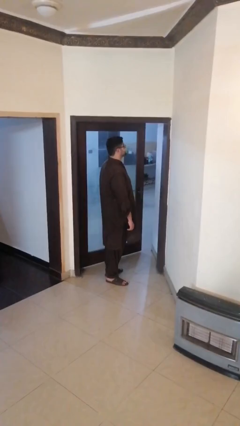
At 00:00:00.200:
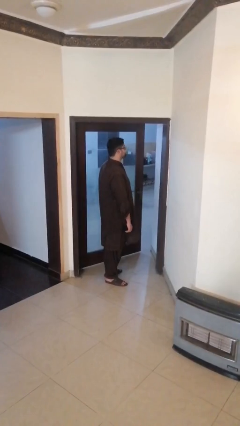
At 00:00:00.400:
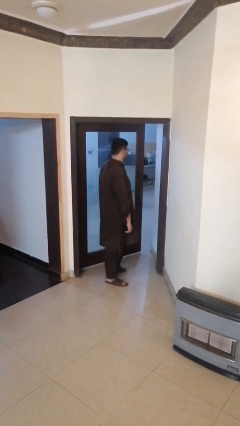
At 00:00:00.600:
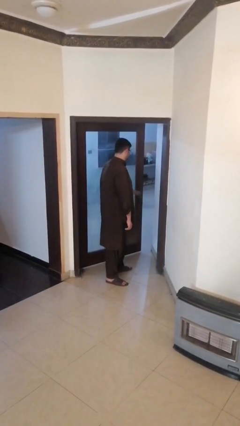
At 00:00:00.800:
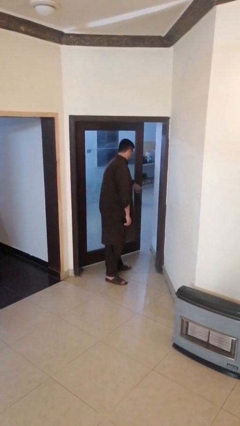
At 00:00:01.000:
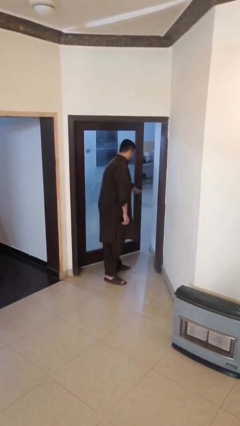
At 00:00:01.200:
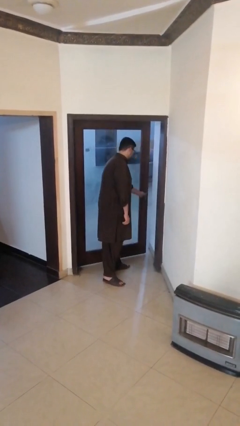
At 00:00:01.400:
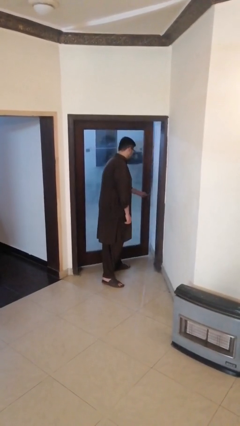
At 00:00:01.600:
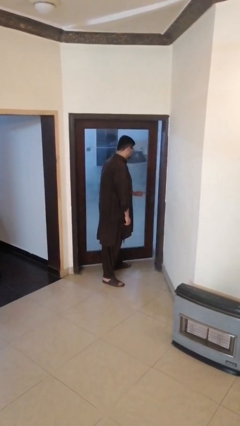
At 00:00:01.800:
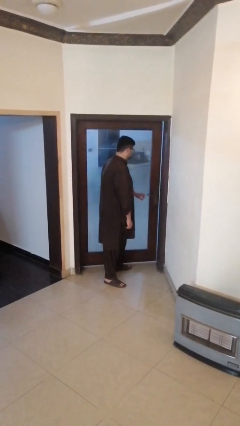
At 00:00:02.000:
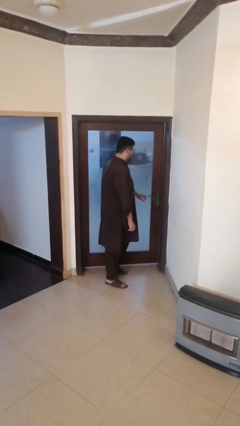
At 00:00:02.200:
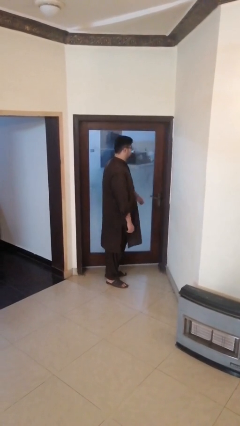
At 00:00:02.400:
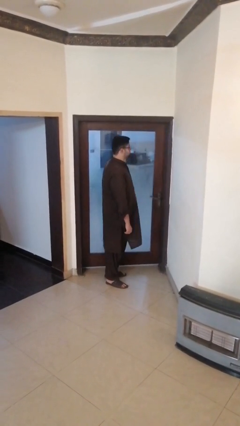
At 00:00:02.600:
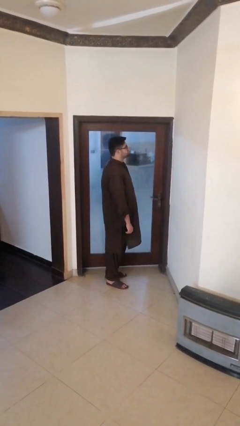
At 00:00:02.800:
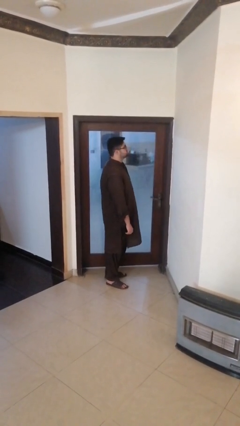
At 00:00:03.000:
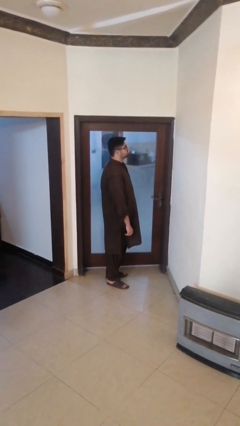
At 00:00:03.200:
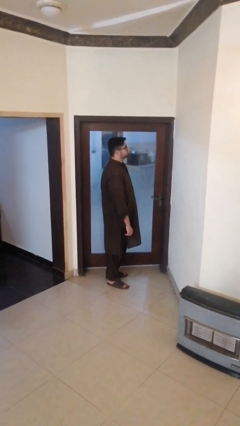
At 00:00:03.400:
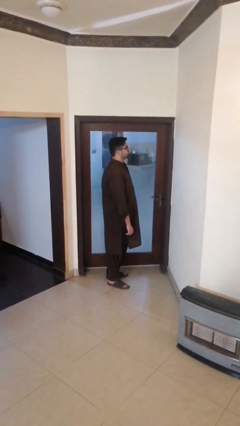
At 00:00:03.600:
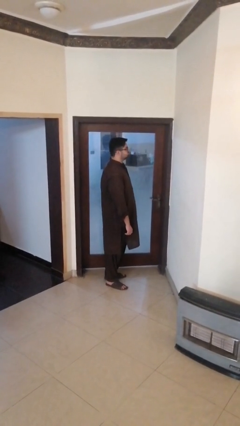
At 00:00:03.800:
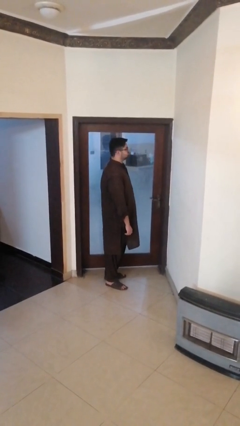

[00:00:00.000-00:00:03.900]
person closes facility door

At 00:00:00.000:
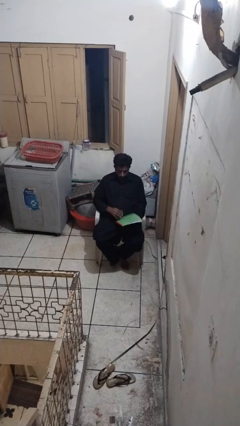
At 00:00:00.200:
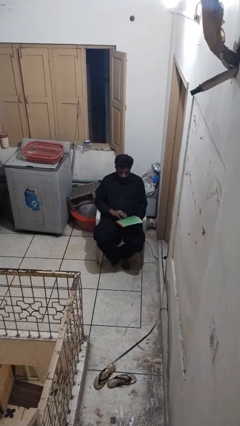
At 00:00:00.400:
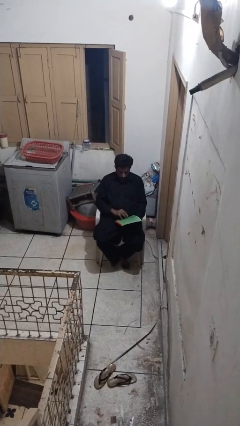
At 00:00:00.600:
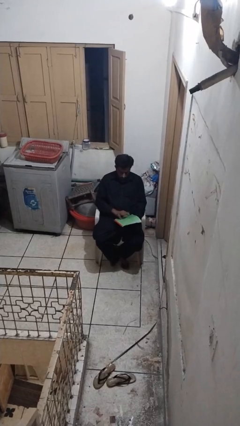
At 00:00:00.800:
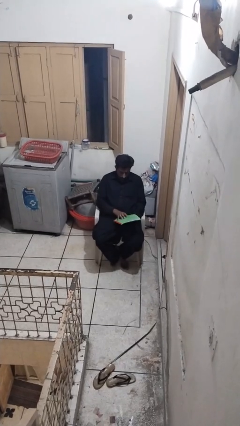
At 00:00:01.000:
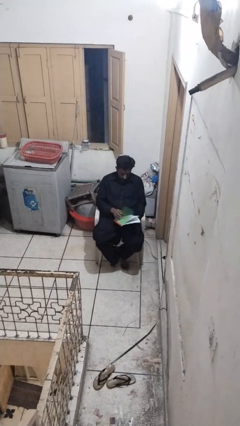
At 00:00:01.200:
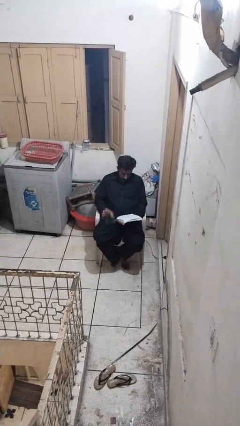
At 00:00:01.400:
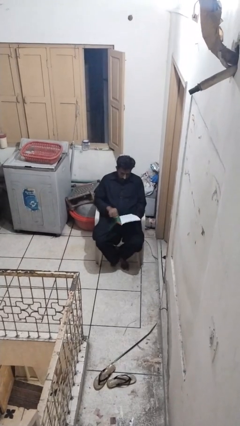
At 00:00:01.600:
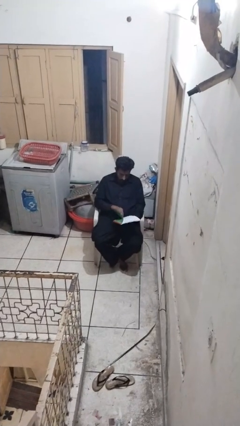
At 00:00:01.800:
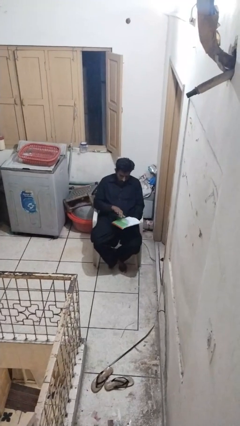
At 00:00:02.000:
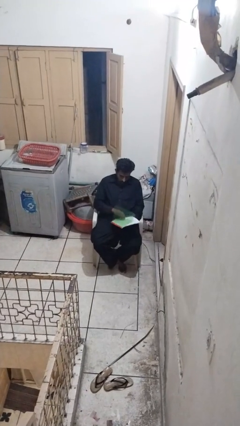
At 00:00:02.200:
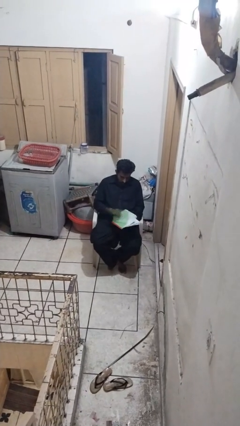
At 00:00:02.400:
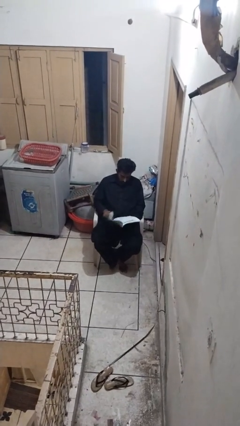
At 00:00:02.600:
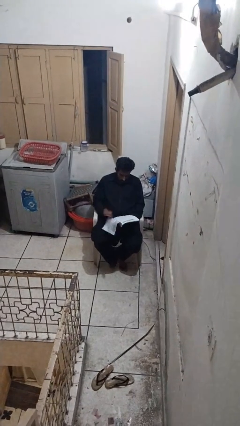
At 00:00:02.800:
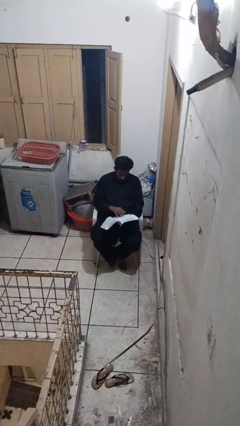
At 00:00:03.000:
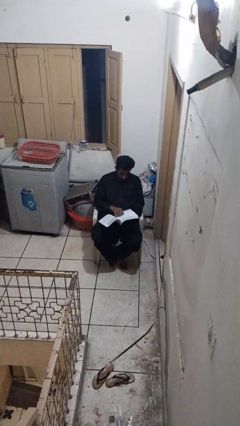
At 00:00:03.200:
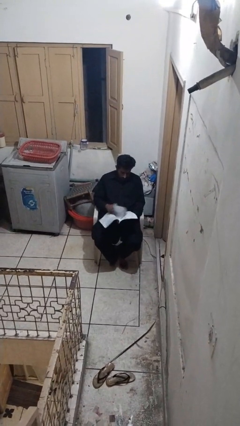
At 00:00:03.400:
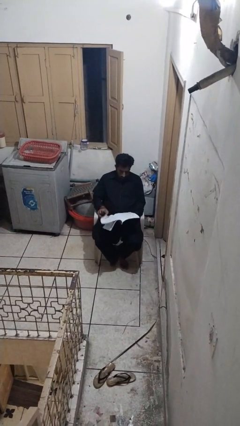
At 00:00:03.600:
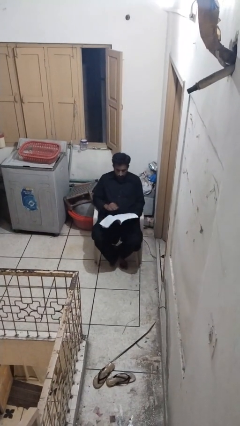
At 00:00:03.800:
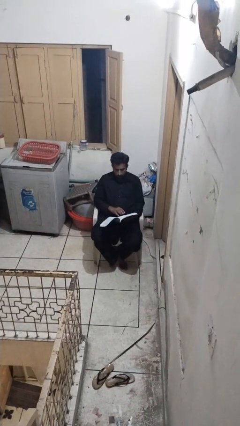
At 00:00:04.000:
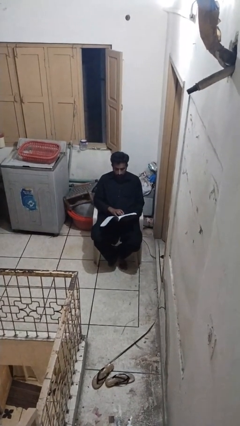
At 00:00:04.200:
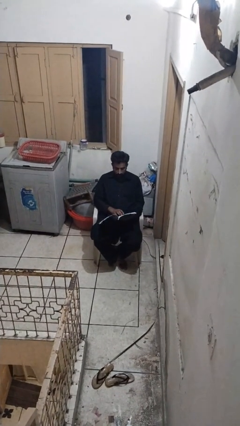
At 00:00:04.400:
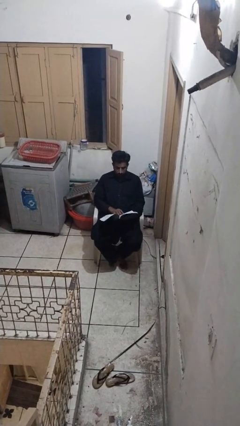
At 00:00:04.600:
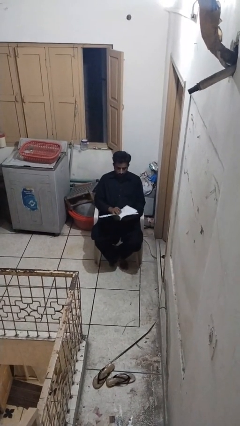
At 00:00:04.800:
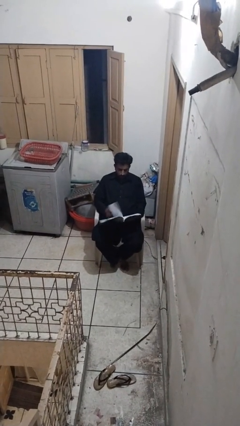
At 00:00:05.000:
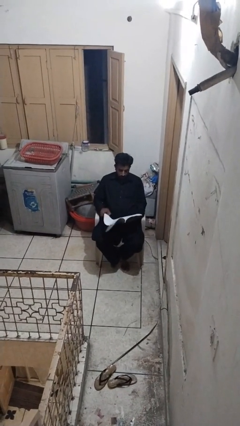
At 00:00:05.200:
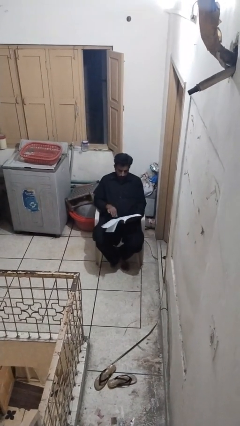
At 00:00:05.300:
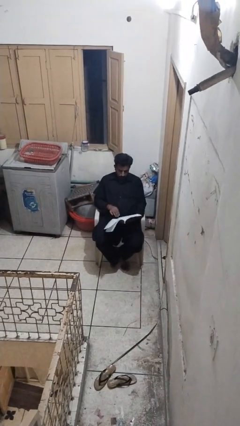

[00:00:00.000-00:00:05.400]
person reads magazine

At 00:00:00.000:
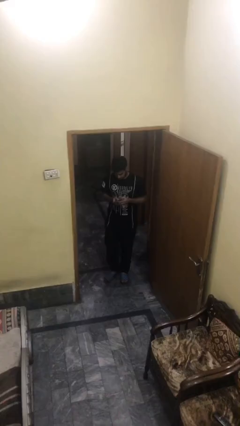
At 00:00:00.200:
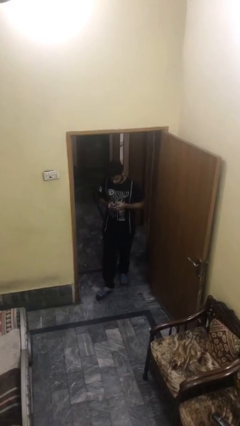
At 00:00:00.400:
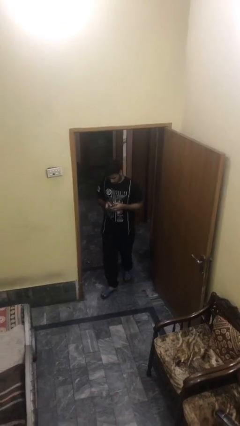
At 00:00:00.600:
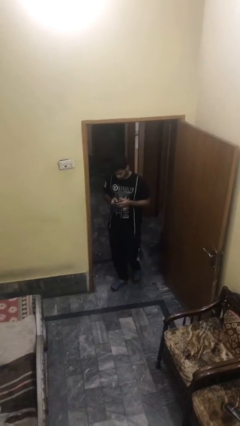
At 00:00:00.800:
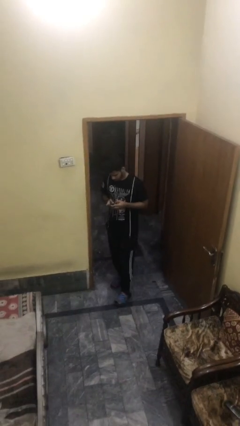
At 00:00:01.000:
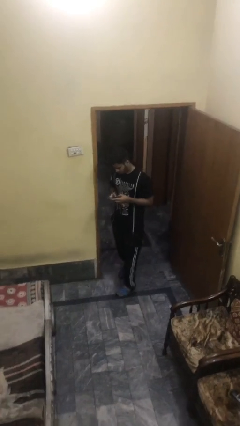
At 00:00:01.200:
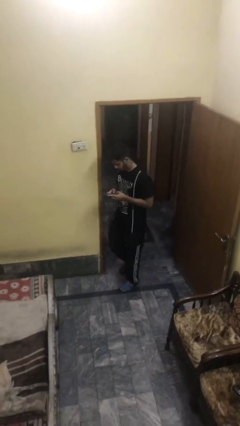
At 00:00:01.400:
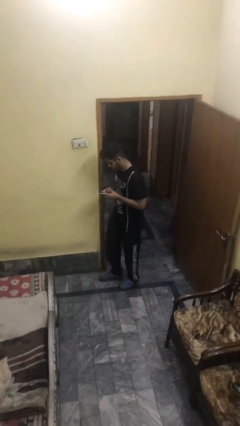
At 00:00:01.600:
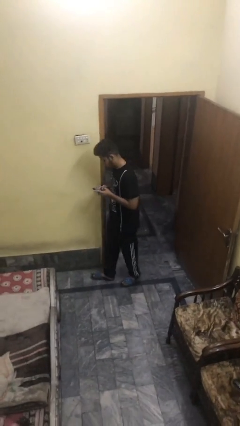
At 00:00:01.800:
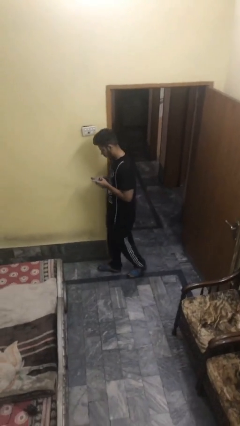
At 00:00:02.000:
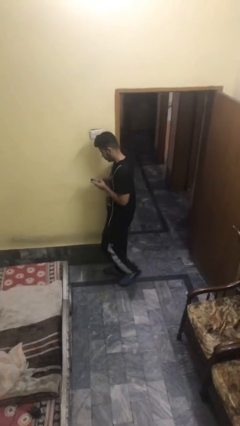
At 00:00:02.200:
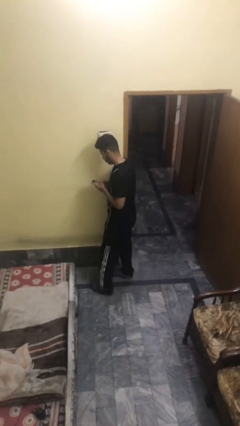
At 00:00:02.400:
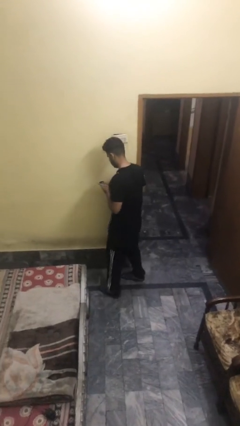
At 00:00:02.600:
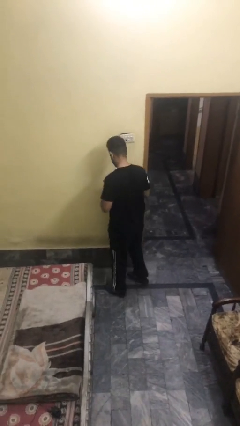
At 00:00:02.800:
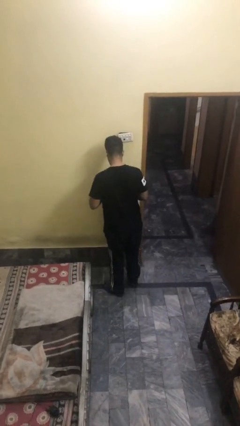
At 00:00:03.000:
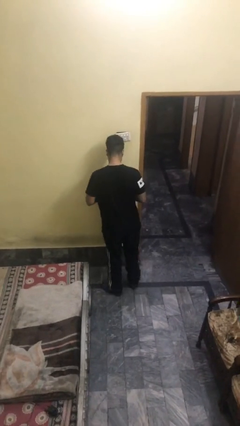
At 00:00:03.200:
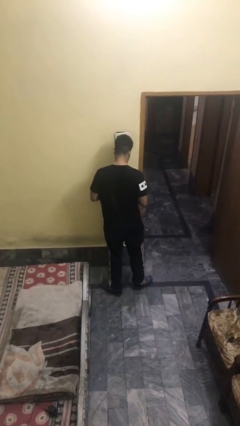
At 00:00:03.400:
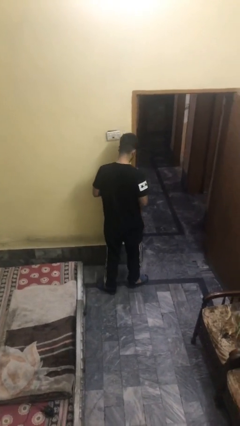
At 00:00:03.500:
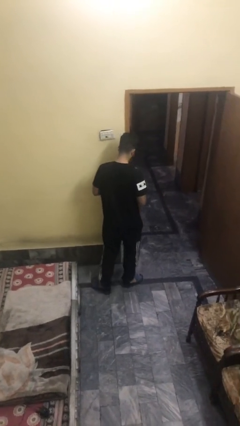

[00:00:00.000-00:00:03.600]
person enters scene through structure

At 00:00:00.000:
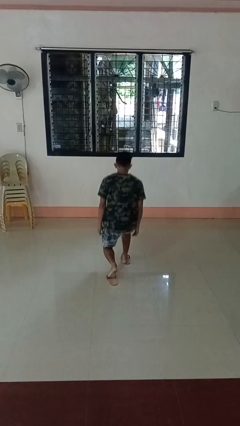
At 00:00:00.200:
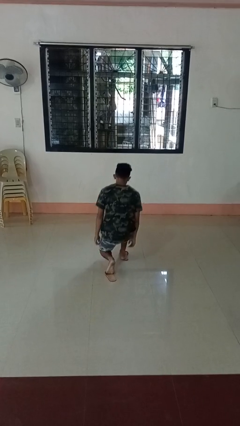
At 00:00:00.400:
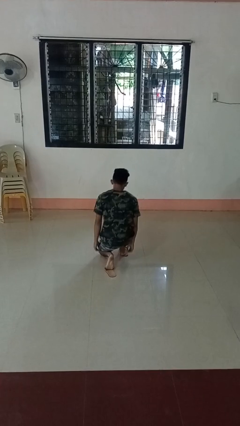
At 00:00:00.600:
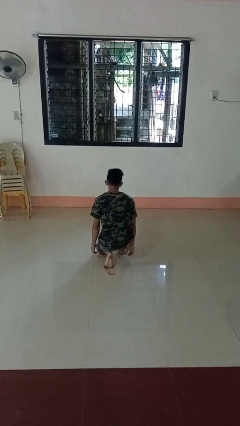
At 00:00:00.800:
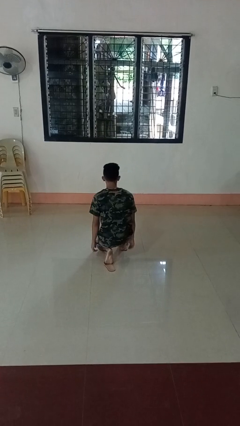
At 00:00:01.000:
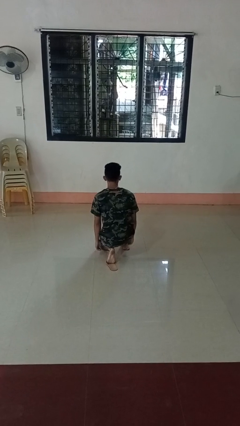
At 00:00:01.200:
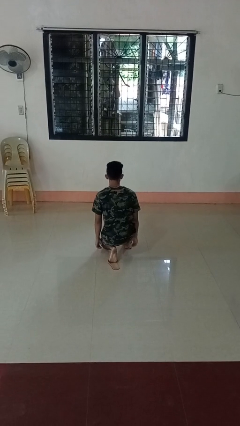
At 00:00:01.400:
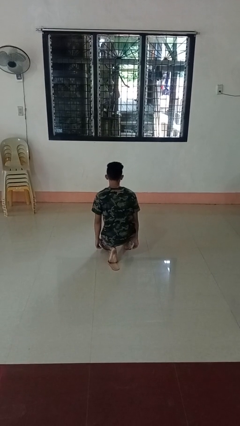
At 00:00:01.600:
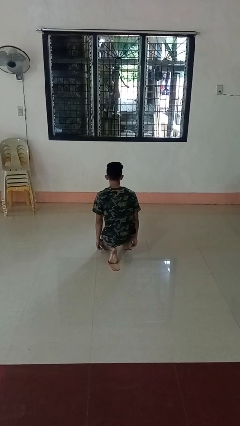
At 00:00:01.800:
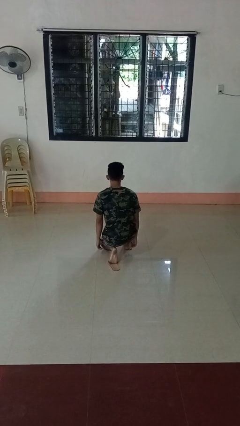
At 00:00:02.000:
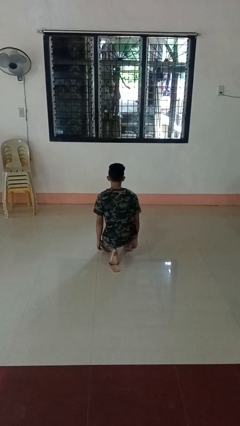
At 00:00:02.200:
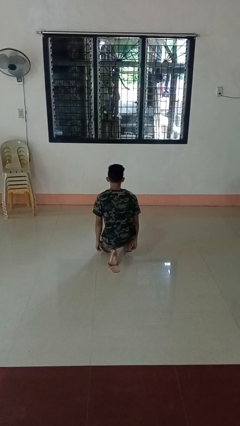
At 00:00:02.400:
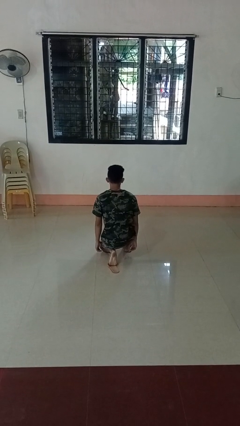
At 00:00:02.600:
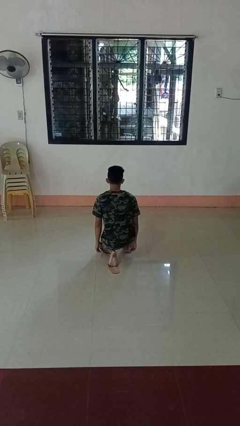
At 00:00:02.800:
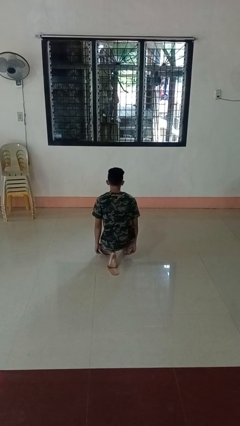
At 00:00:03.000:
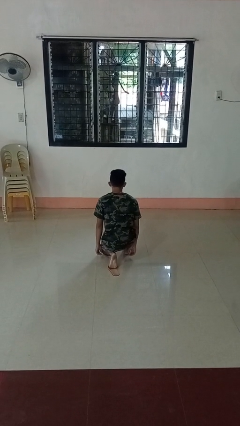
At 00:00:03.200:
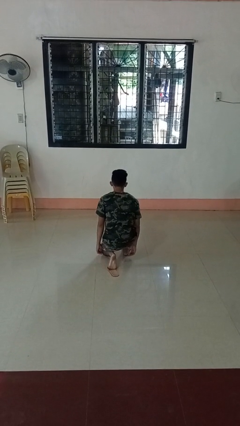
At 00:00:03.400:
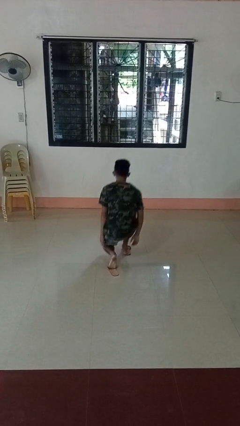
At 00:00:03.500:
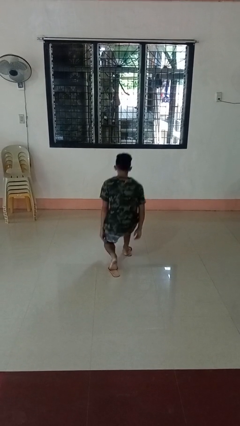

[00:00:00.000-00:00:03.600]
person kneels

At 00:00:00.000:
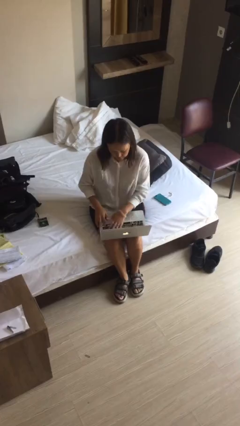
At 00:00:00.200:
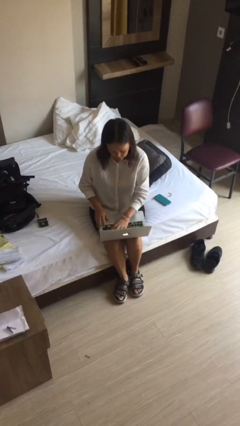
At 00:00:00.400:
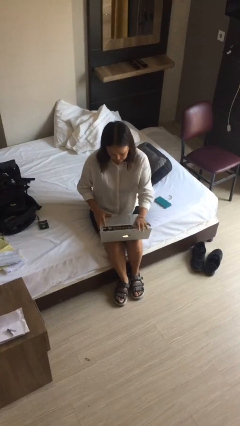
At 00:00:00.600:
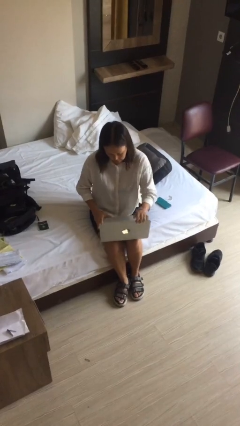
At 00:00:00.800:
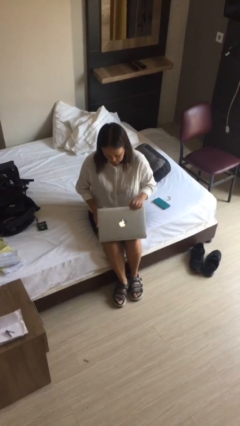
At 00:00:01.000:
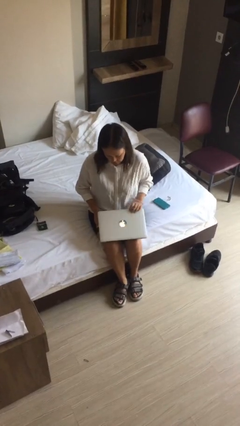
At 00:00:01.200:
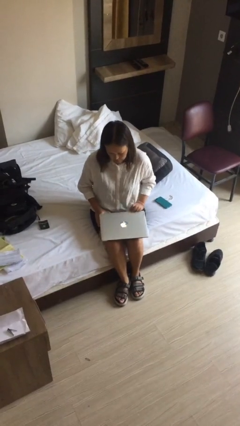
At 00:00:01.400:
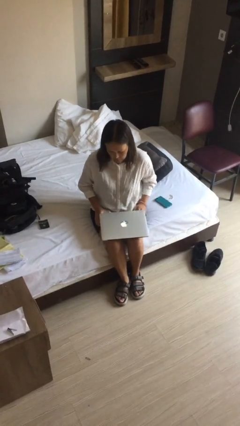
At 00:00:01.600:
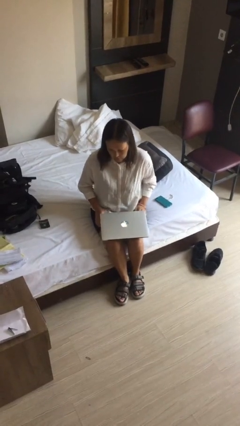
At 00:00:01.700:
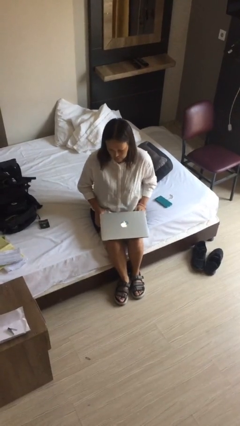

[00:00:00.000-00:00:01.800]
person closes laptop
